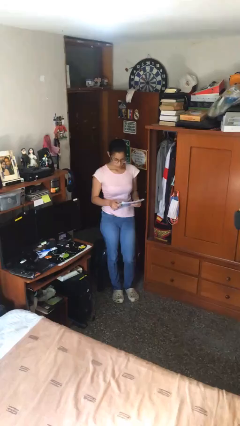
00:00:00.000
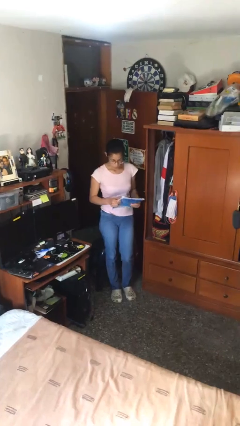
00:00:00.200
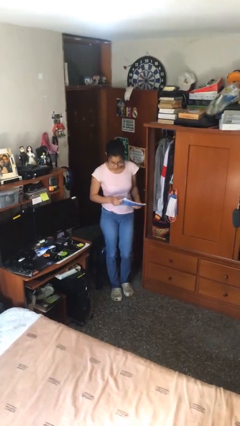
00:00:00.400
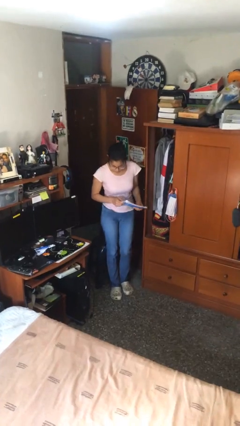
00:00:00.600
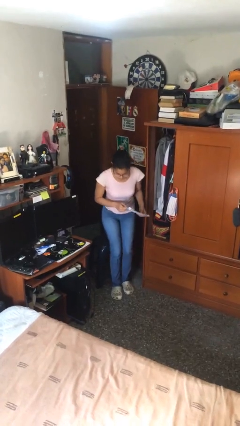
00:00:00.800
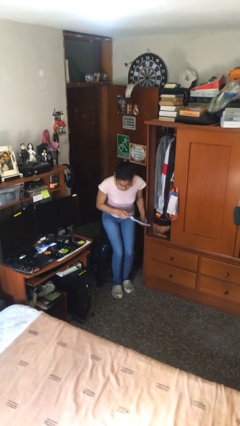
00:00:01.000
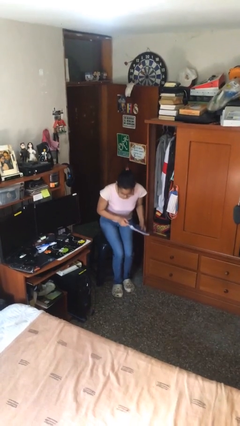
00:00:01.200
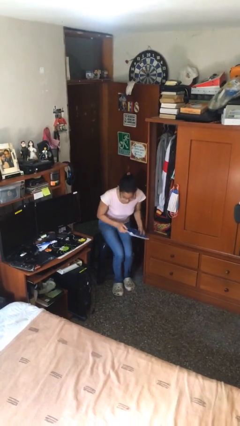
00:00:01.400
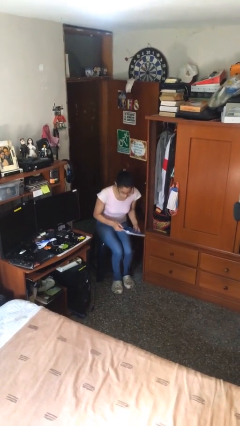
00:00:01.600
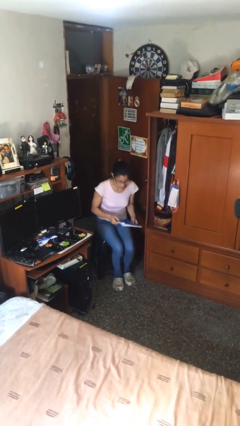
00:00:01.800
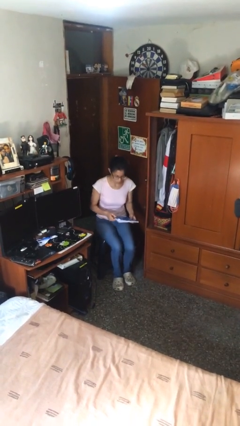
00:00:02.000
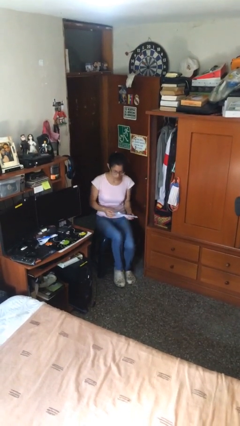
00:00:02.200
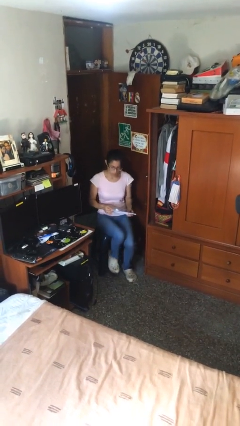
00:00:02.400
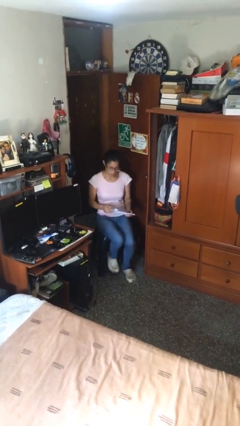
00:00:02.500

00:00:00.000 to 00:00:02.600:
person sits down

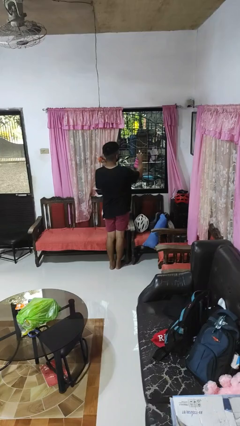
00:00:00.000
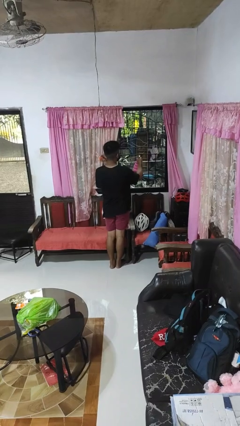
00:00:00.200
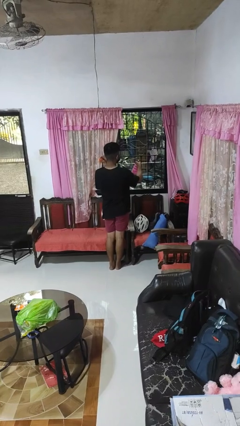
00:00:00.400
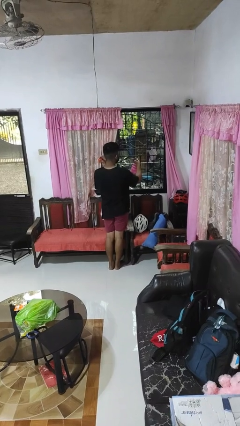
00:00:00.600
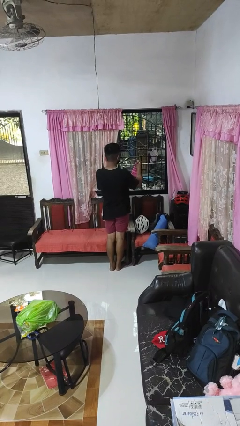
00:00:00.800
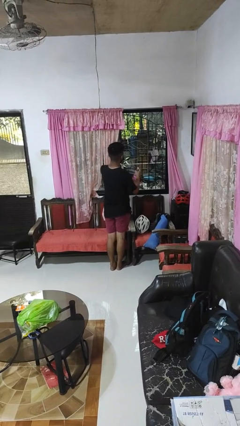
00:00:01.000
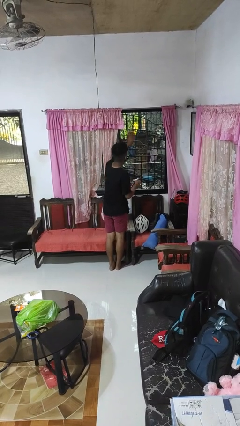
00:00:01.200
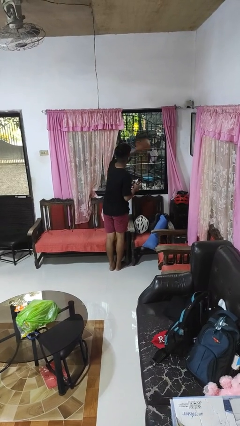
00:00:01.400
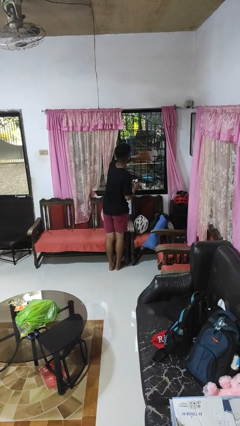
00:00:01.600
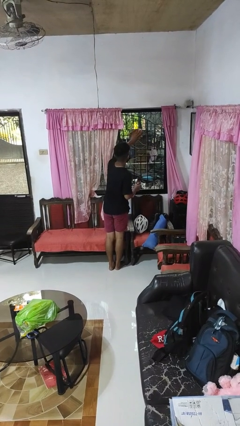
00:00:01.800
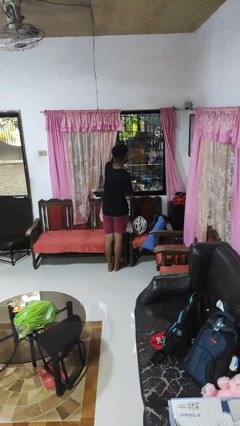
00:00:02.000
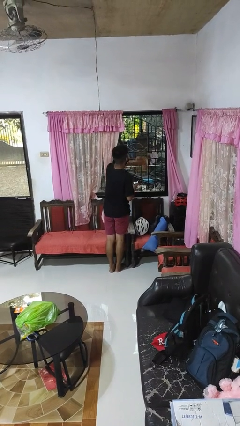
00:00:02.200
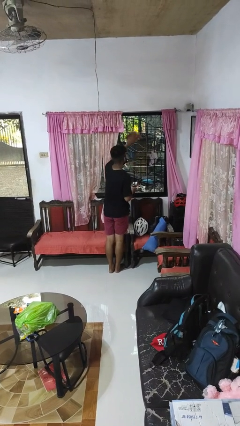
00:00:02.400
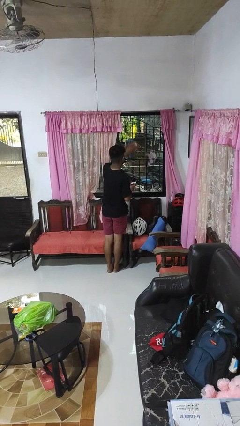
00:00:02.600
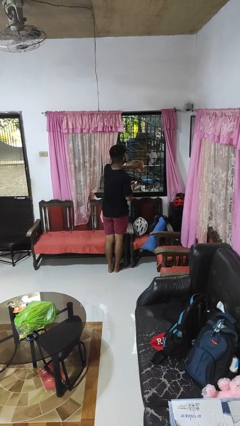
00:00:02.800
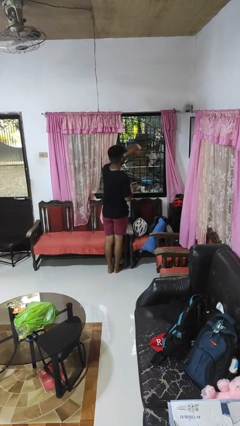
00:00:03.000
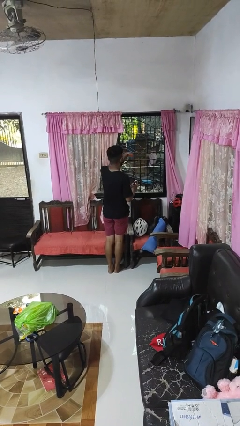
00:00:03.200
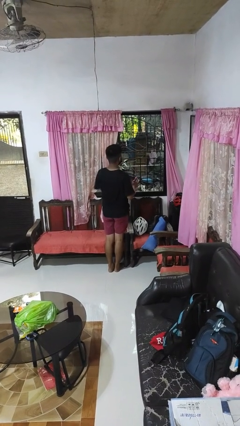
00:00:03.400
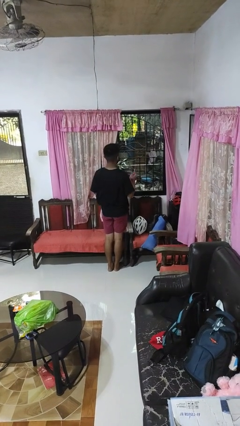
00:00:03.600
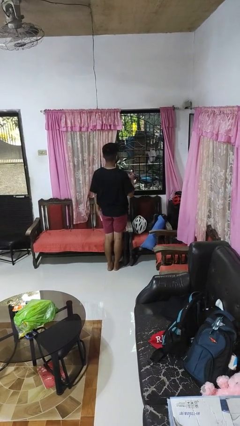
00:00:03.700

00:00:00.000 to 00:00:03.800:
person washes window

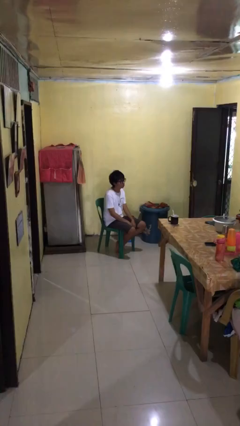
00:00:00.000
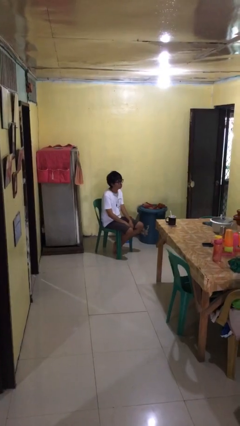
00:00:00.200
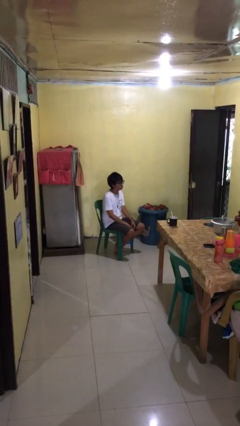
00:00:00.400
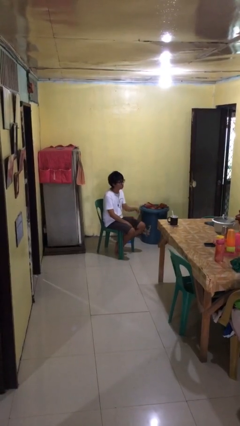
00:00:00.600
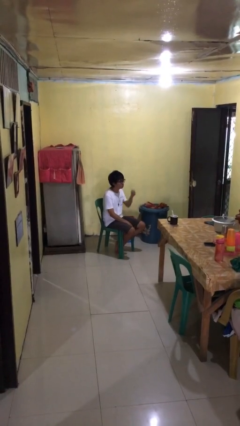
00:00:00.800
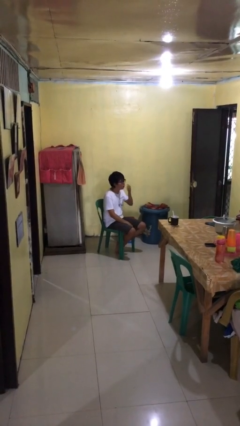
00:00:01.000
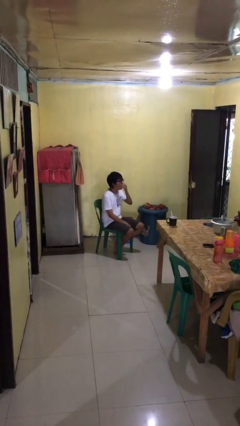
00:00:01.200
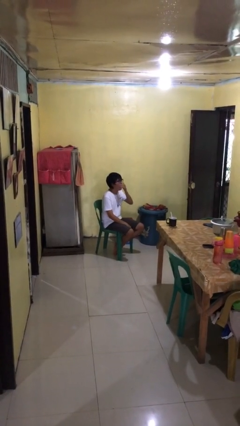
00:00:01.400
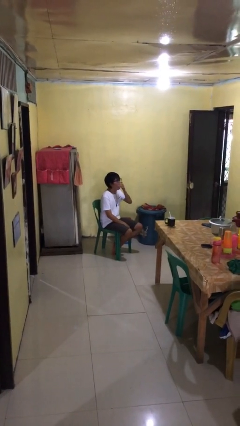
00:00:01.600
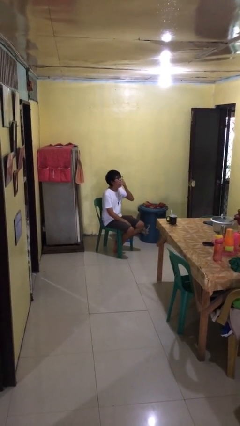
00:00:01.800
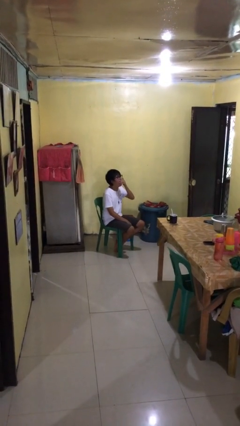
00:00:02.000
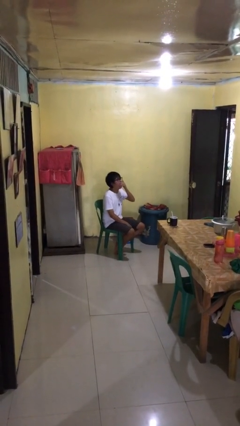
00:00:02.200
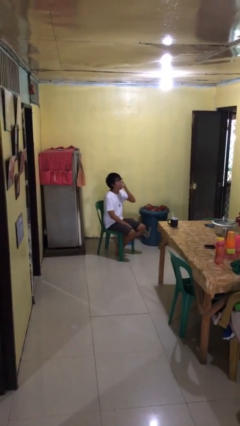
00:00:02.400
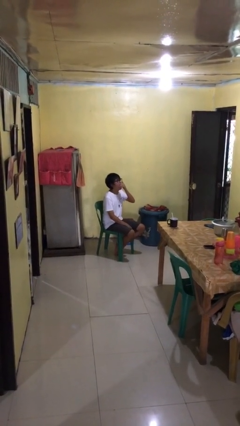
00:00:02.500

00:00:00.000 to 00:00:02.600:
person yawns

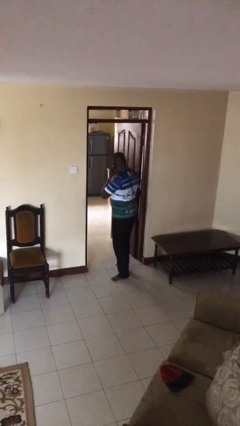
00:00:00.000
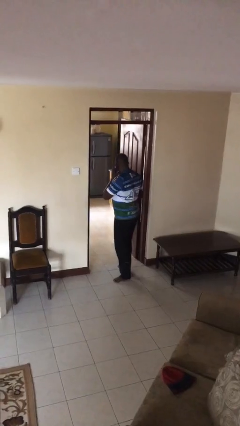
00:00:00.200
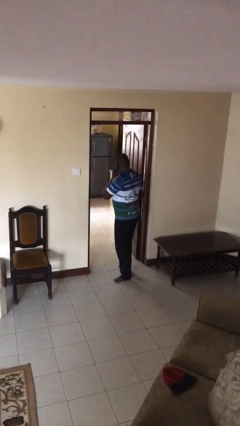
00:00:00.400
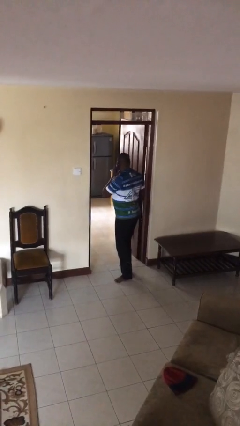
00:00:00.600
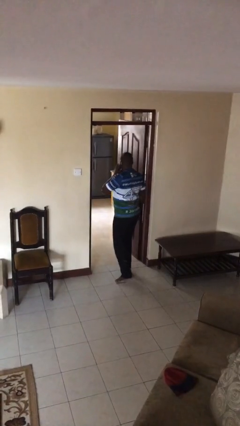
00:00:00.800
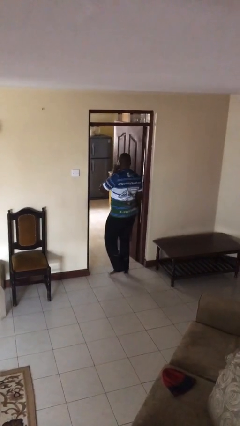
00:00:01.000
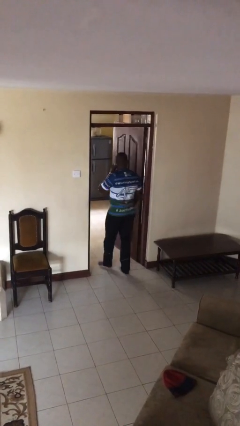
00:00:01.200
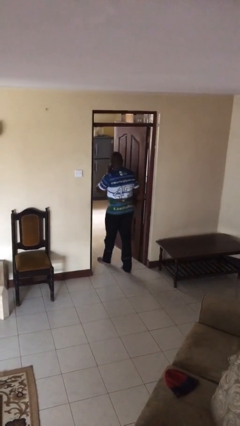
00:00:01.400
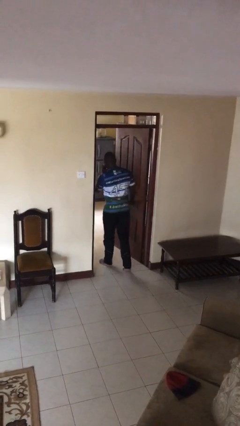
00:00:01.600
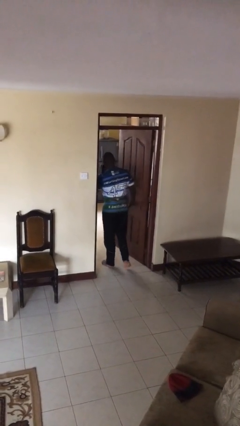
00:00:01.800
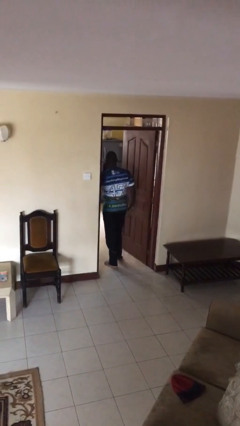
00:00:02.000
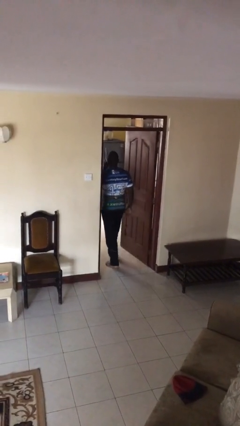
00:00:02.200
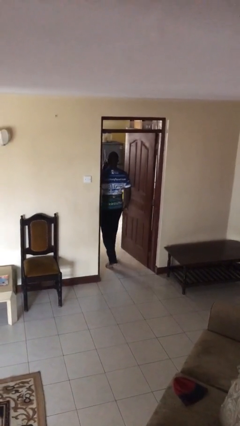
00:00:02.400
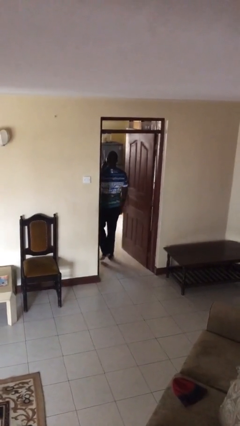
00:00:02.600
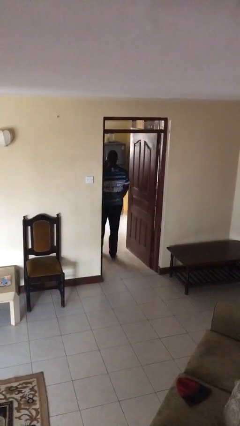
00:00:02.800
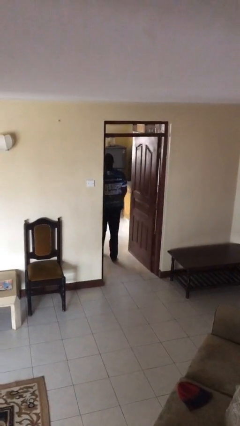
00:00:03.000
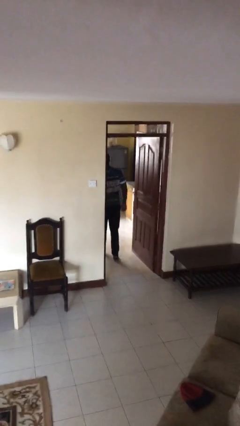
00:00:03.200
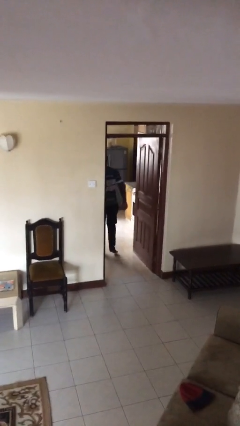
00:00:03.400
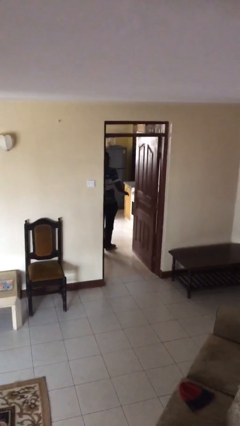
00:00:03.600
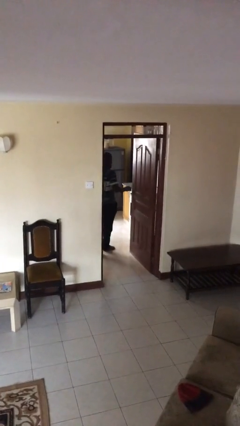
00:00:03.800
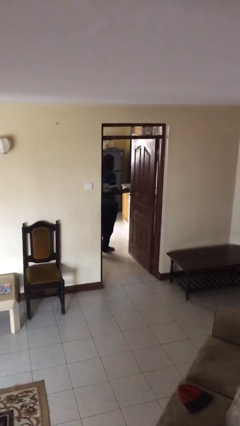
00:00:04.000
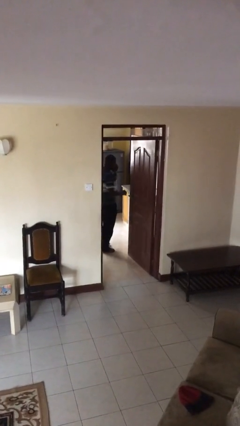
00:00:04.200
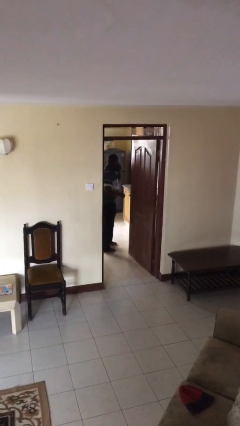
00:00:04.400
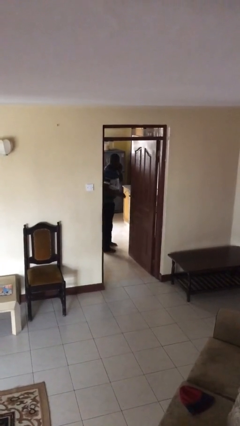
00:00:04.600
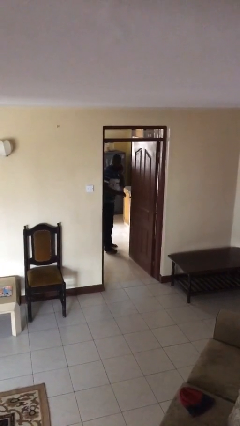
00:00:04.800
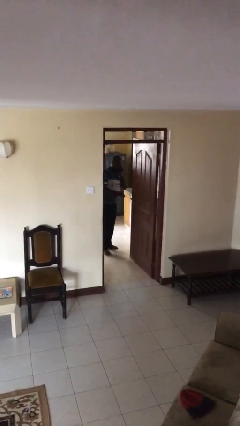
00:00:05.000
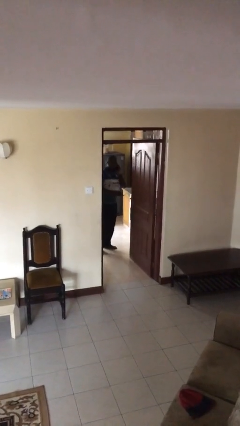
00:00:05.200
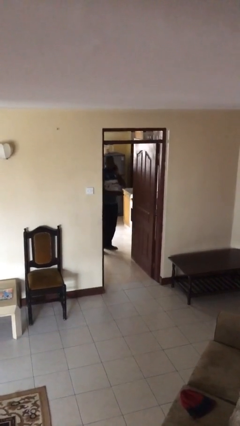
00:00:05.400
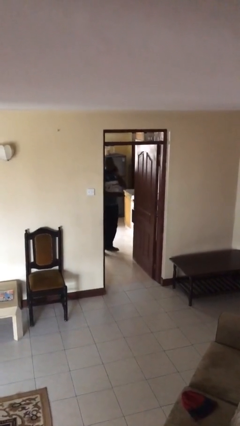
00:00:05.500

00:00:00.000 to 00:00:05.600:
person exits scene through structure

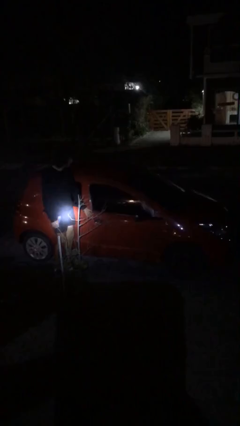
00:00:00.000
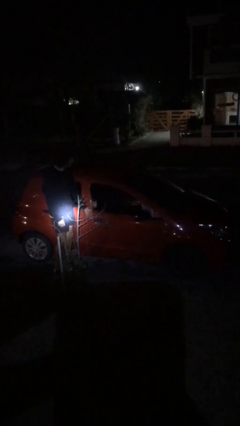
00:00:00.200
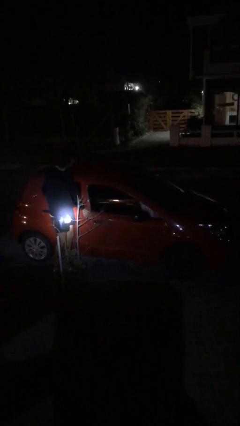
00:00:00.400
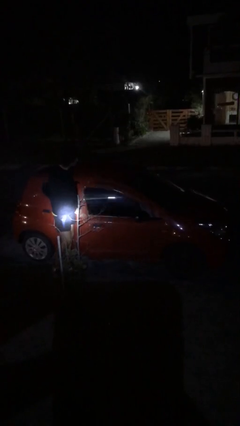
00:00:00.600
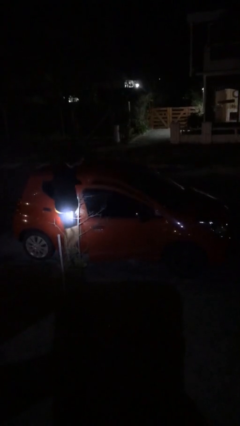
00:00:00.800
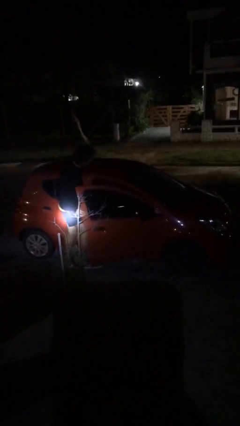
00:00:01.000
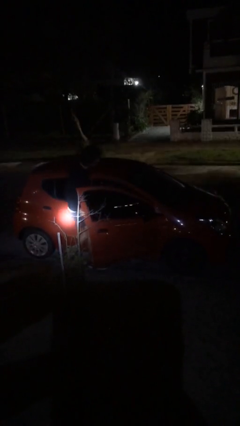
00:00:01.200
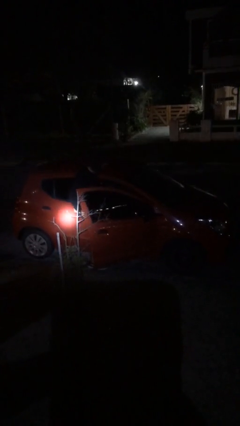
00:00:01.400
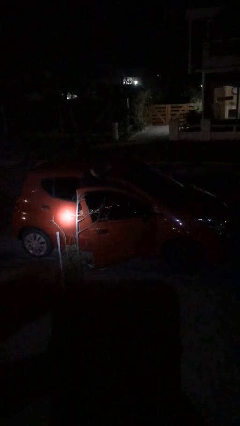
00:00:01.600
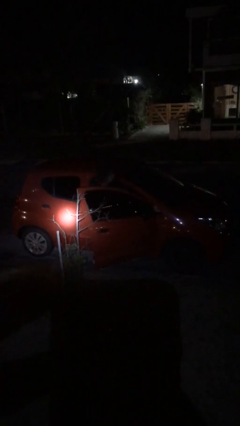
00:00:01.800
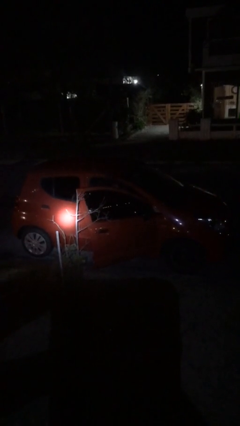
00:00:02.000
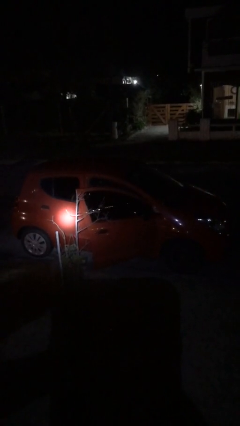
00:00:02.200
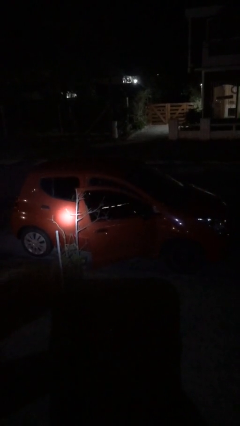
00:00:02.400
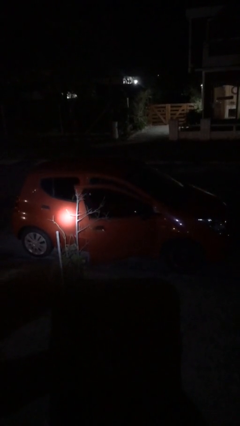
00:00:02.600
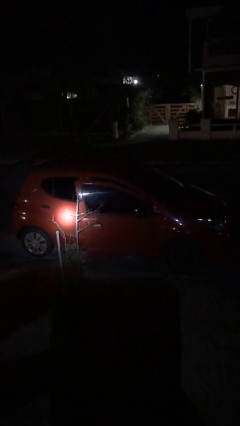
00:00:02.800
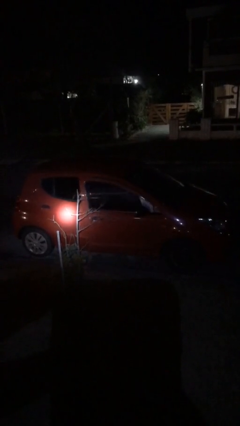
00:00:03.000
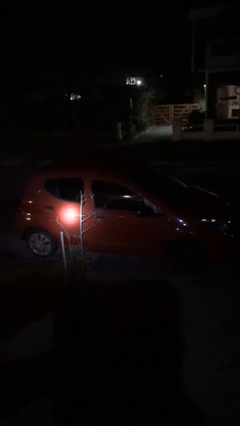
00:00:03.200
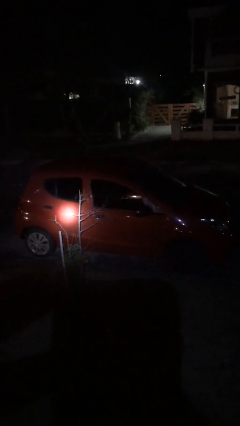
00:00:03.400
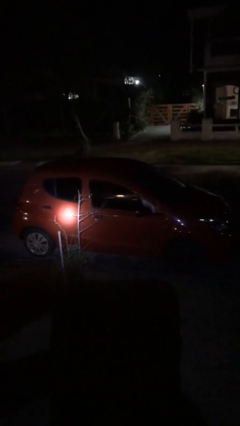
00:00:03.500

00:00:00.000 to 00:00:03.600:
car picks up person
